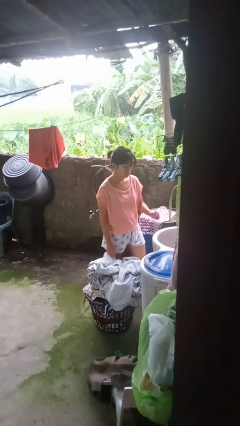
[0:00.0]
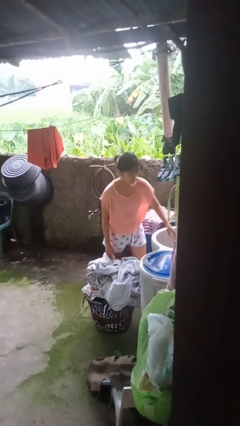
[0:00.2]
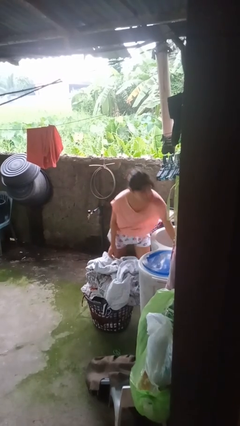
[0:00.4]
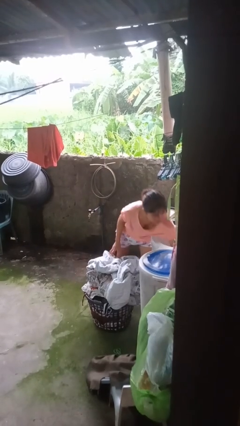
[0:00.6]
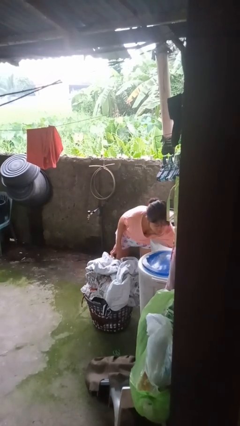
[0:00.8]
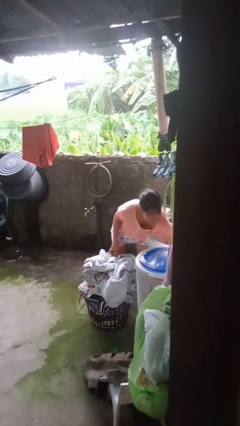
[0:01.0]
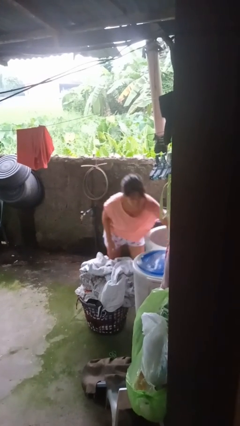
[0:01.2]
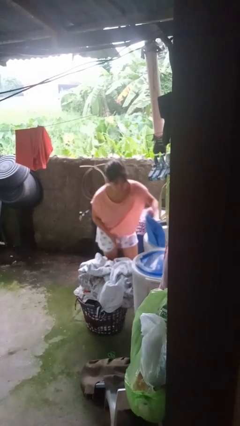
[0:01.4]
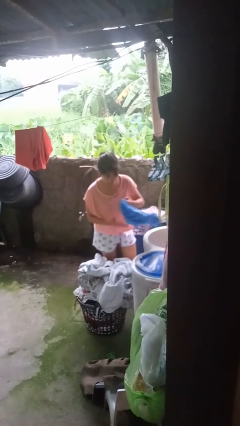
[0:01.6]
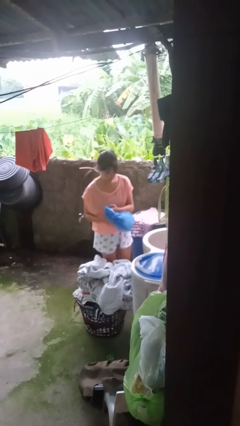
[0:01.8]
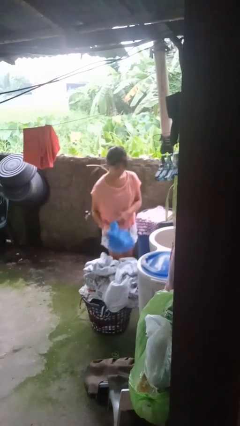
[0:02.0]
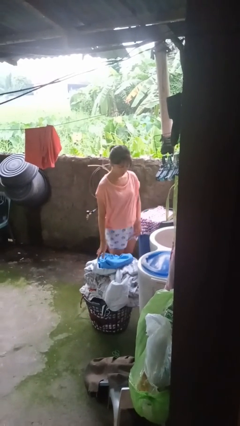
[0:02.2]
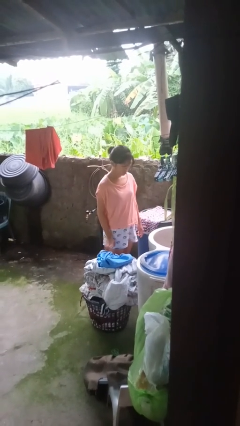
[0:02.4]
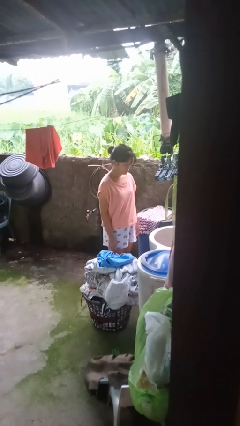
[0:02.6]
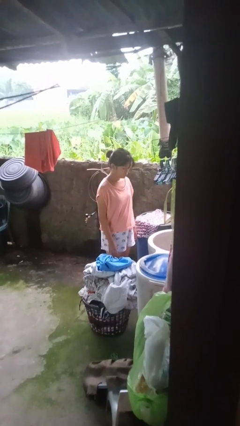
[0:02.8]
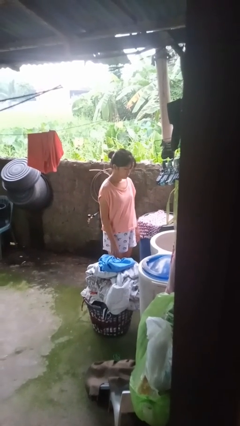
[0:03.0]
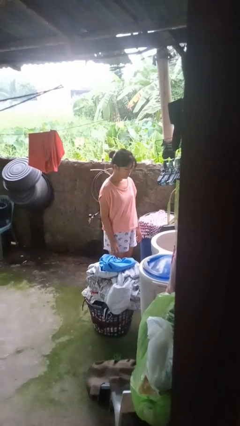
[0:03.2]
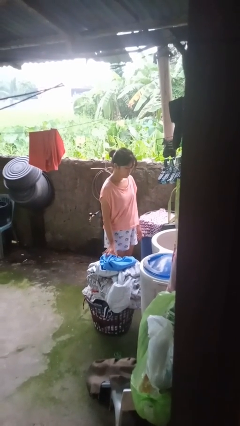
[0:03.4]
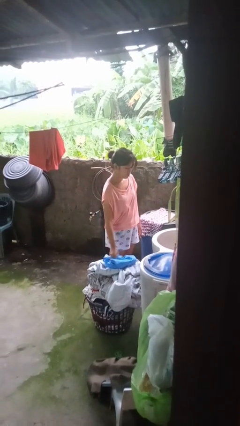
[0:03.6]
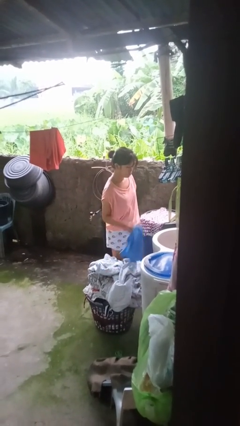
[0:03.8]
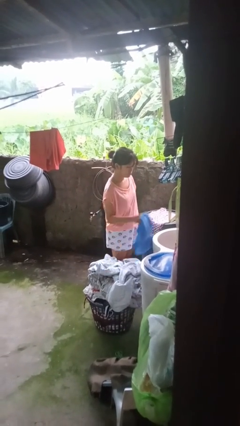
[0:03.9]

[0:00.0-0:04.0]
person unloads clotheswasher

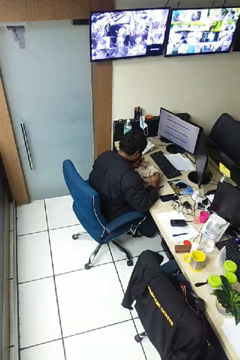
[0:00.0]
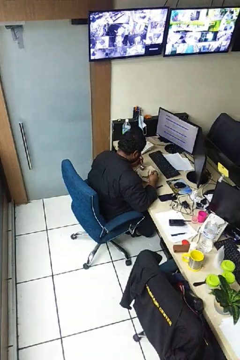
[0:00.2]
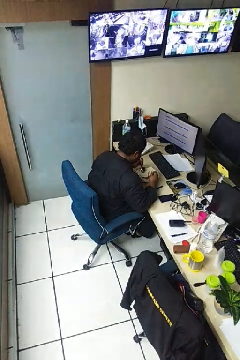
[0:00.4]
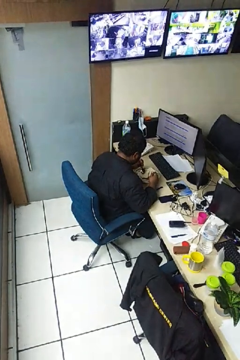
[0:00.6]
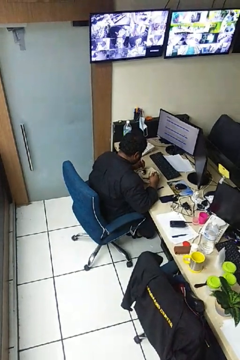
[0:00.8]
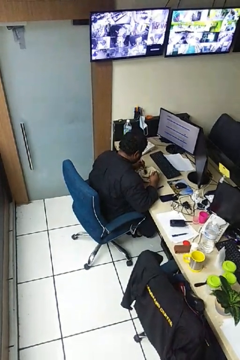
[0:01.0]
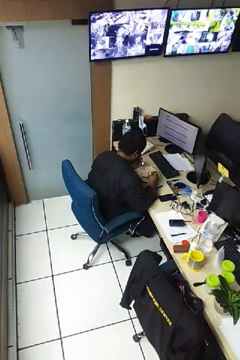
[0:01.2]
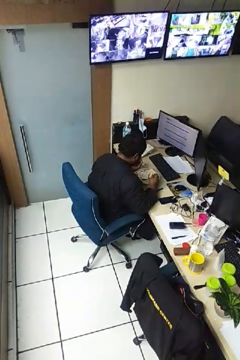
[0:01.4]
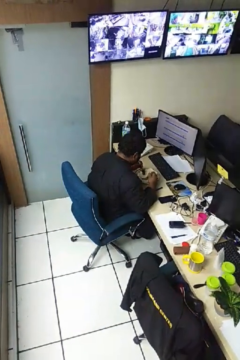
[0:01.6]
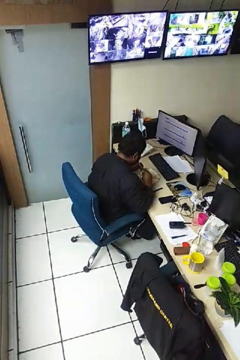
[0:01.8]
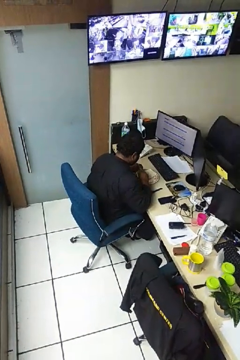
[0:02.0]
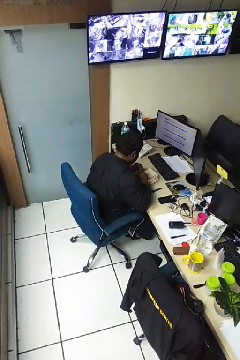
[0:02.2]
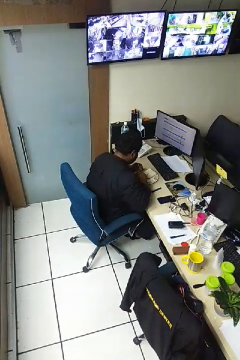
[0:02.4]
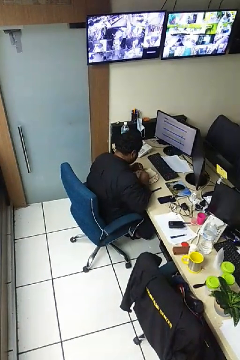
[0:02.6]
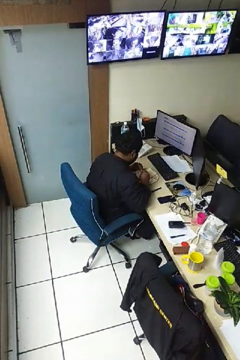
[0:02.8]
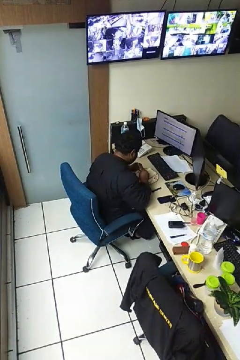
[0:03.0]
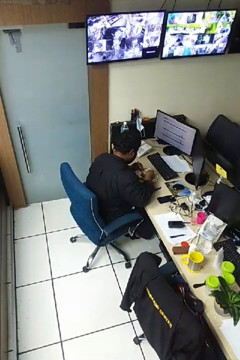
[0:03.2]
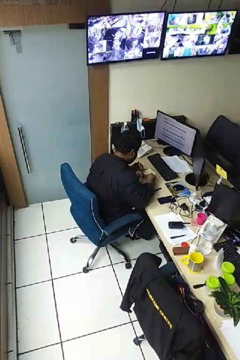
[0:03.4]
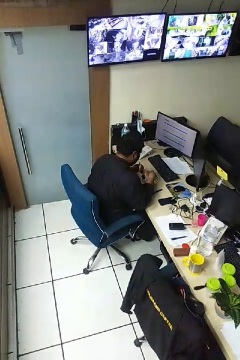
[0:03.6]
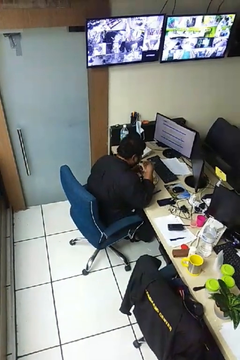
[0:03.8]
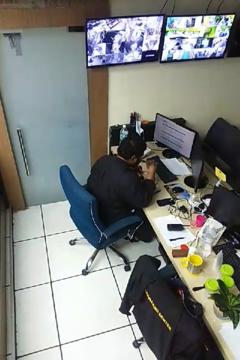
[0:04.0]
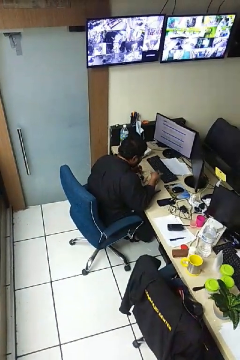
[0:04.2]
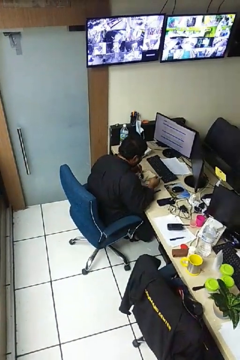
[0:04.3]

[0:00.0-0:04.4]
person eats with utensil

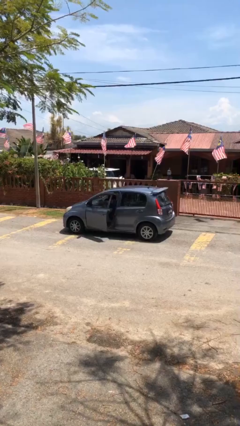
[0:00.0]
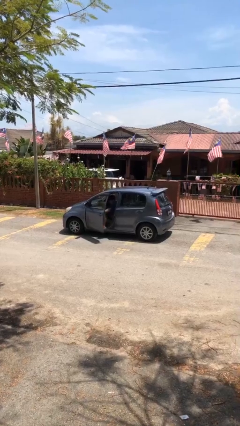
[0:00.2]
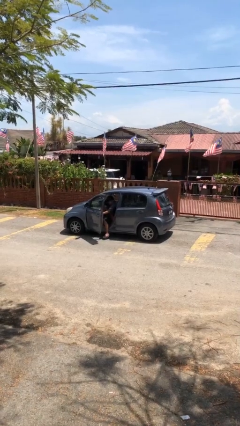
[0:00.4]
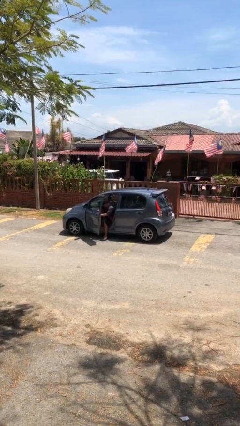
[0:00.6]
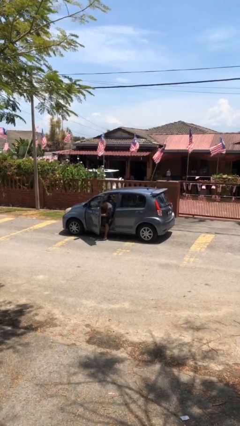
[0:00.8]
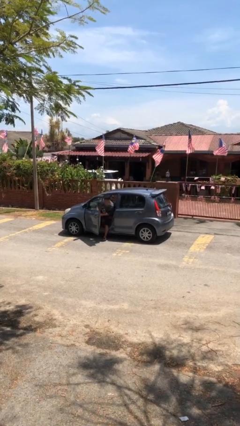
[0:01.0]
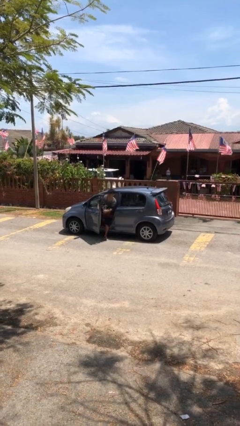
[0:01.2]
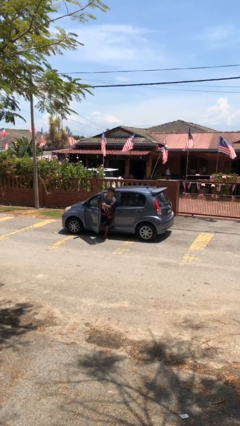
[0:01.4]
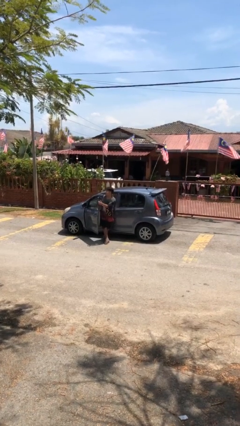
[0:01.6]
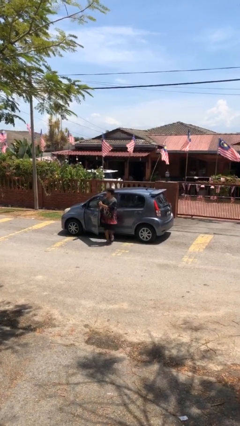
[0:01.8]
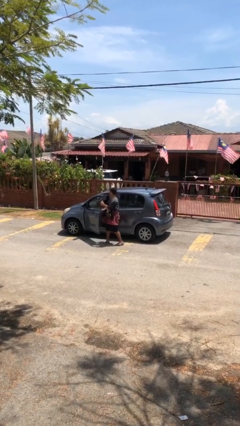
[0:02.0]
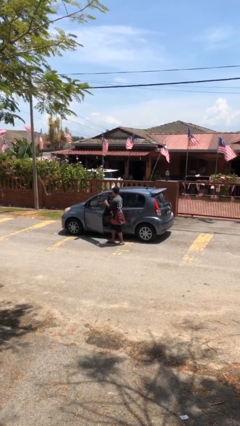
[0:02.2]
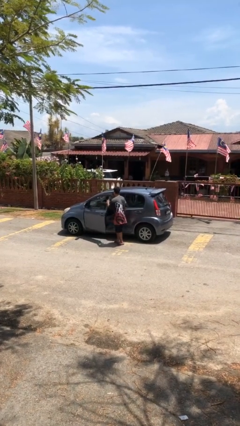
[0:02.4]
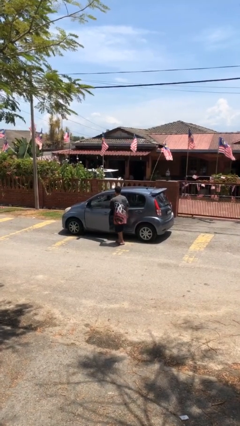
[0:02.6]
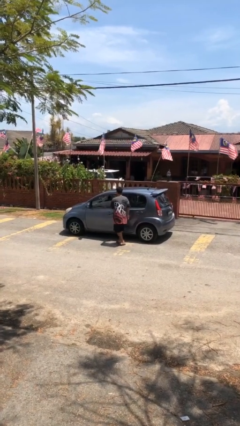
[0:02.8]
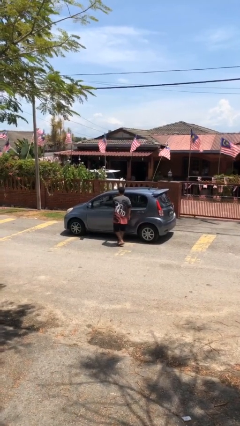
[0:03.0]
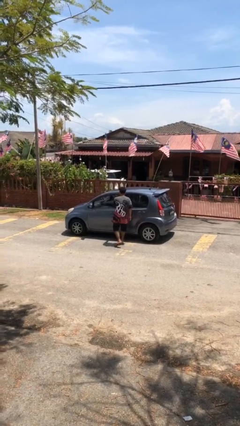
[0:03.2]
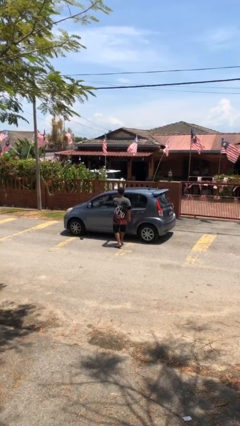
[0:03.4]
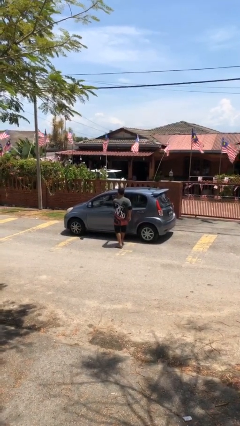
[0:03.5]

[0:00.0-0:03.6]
car drops off person

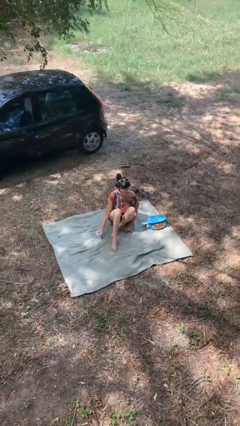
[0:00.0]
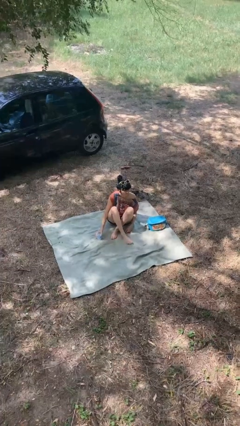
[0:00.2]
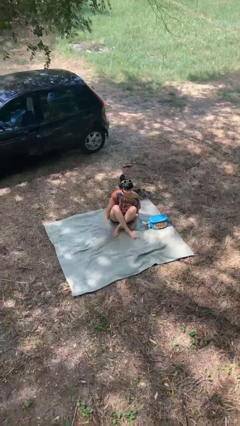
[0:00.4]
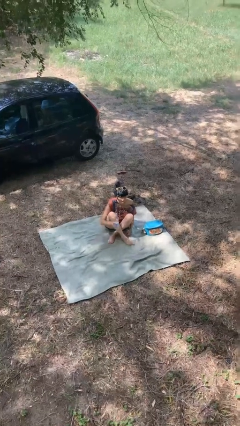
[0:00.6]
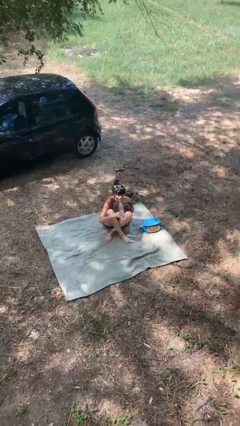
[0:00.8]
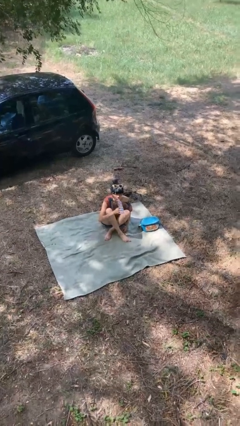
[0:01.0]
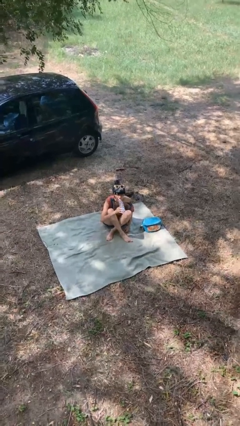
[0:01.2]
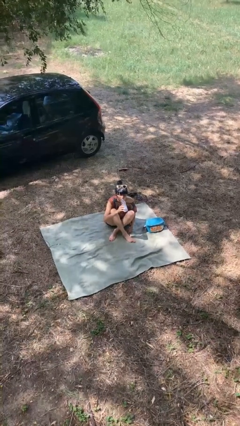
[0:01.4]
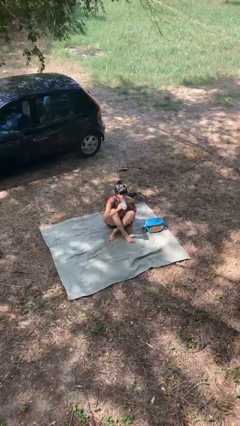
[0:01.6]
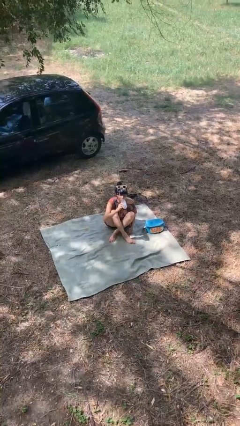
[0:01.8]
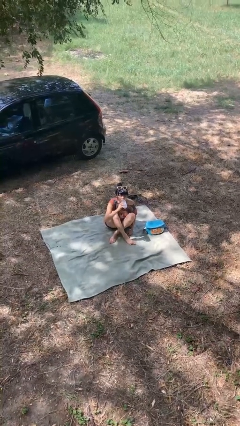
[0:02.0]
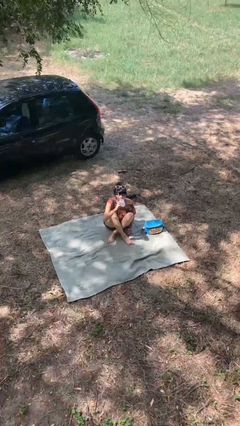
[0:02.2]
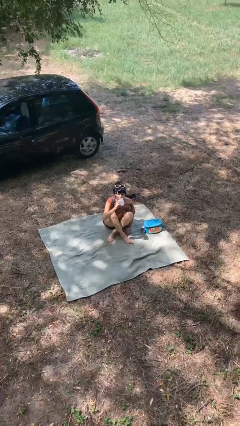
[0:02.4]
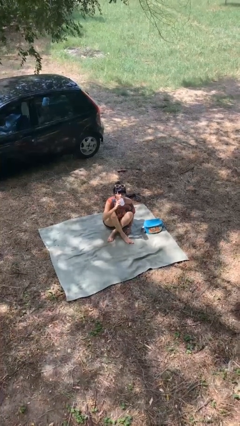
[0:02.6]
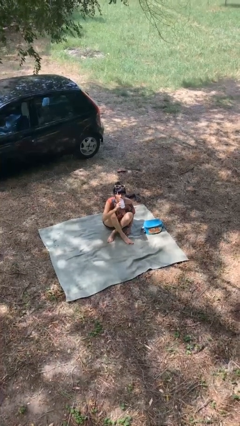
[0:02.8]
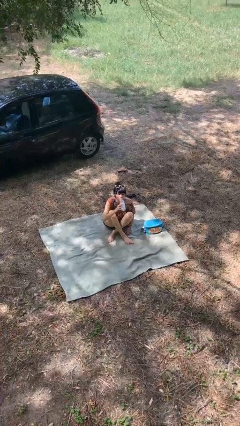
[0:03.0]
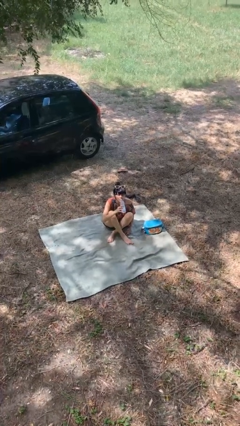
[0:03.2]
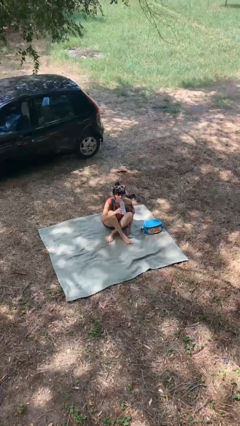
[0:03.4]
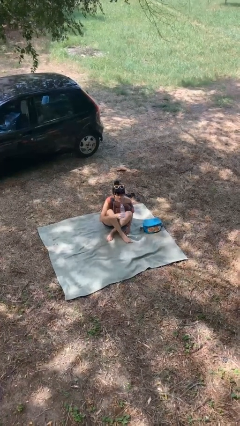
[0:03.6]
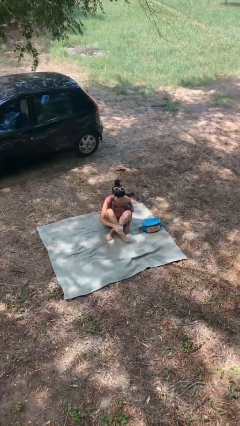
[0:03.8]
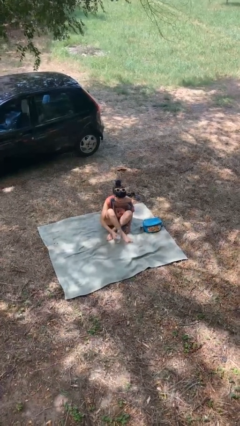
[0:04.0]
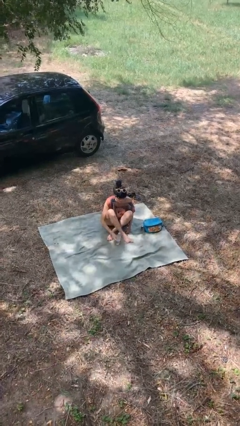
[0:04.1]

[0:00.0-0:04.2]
person drinks from bottle

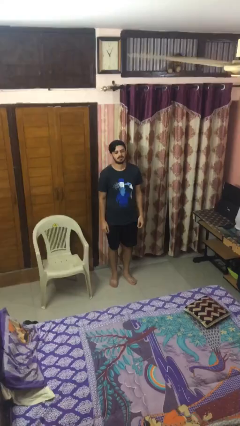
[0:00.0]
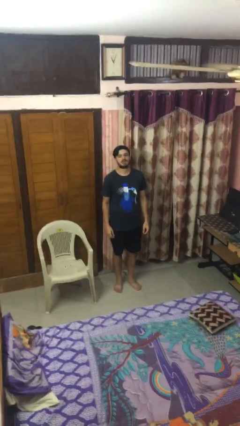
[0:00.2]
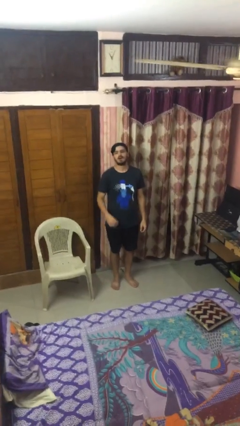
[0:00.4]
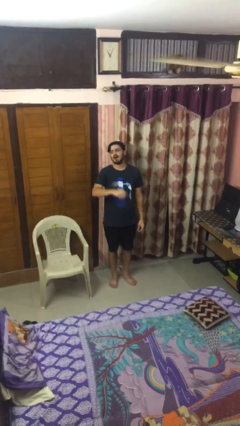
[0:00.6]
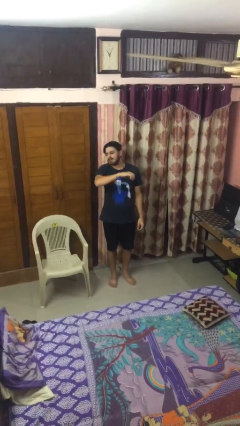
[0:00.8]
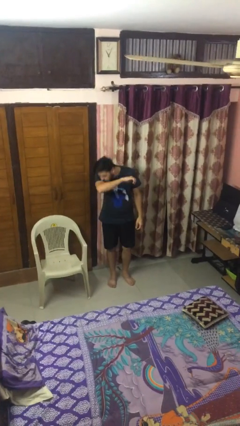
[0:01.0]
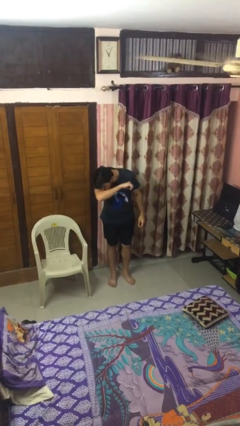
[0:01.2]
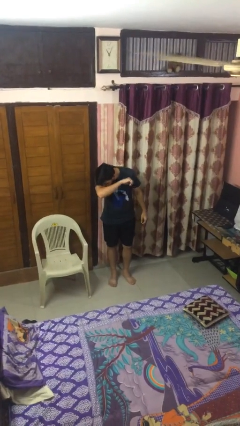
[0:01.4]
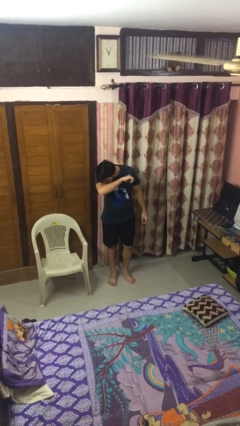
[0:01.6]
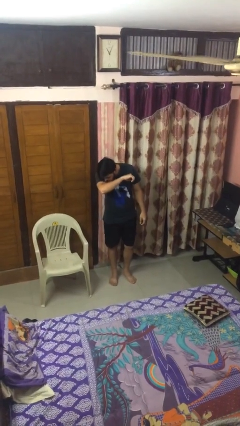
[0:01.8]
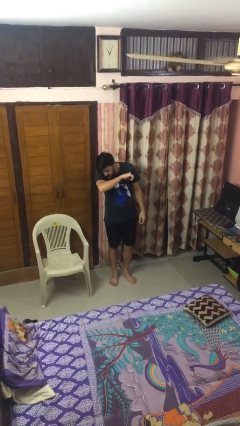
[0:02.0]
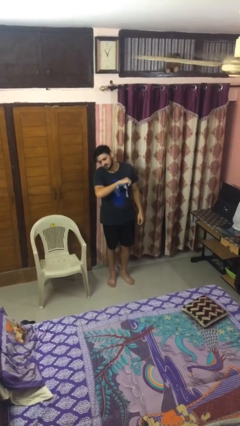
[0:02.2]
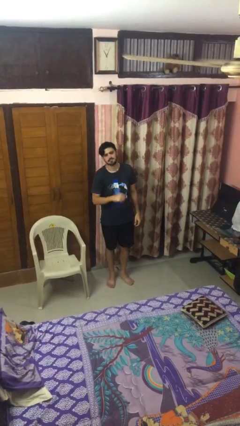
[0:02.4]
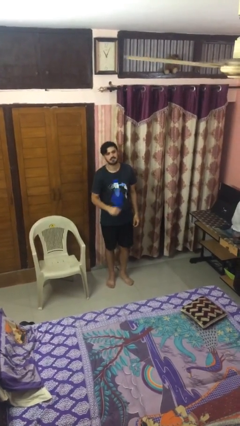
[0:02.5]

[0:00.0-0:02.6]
person sneezes into arm
